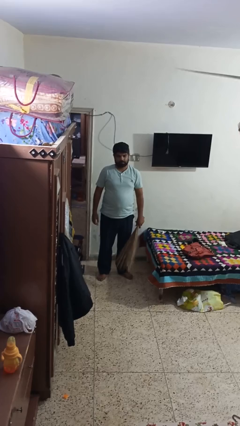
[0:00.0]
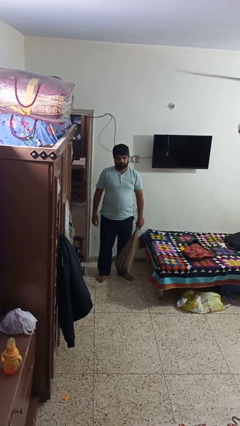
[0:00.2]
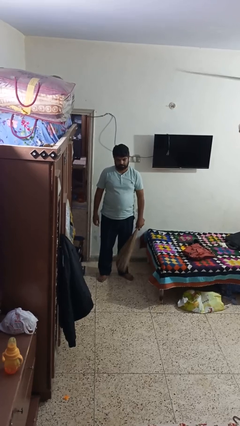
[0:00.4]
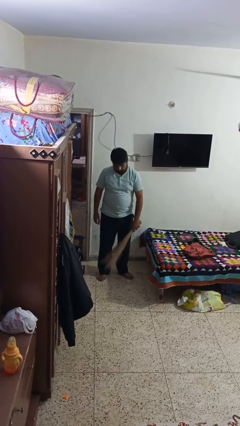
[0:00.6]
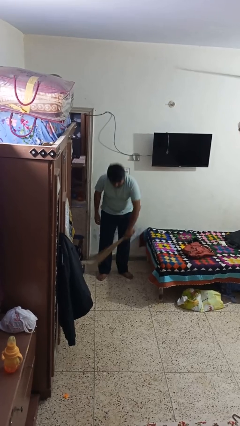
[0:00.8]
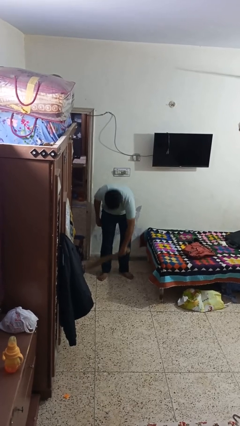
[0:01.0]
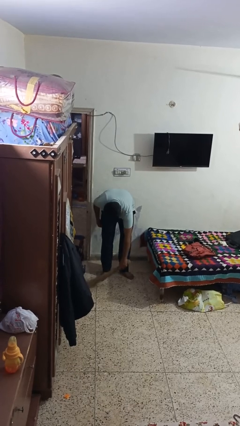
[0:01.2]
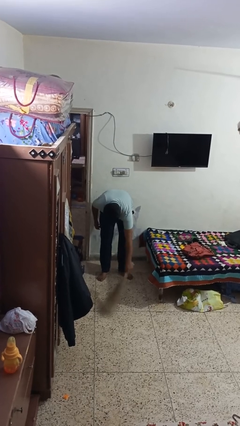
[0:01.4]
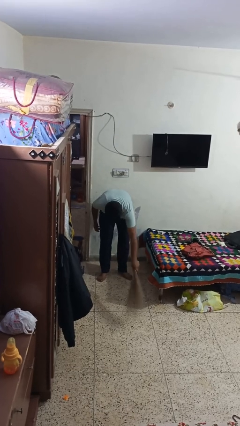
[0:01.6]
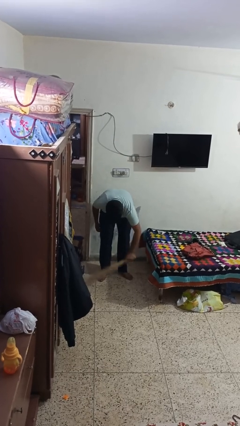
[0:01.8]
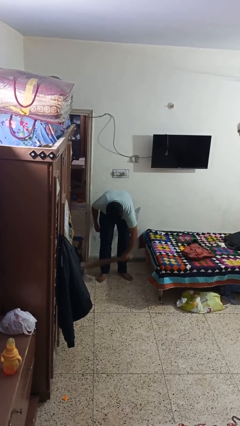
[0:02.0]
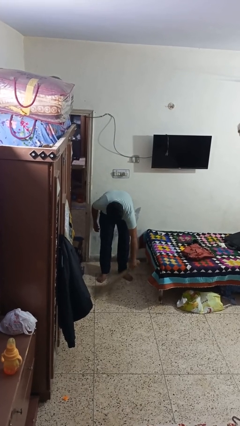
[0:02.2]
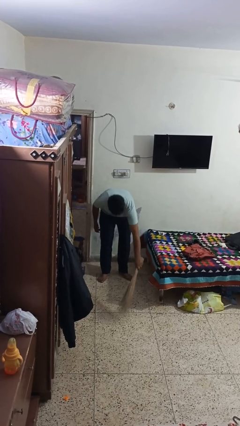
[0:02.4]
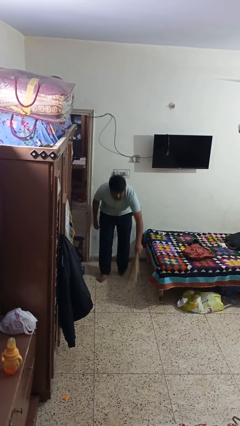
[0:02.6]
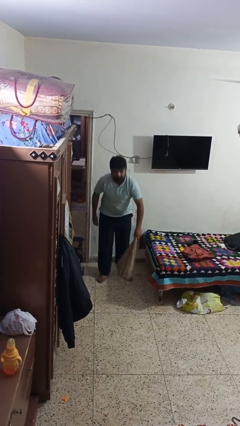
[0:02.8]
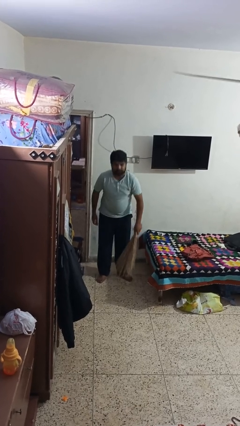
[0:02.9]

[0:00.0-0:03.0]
person sweeps floor

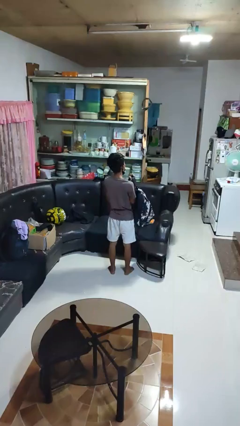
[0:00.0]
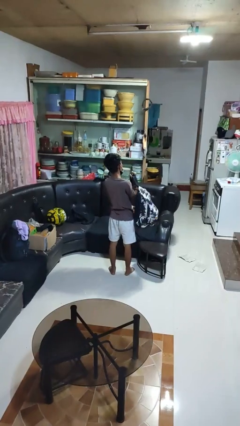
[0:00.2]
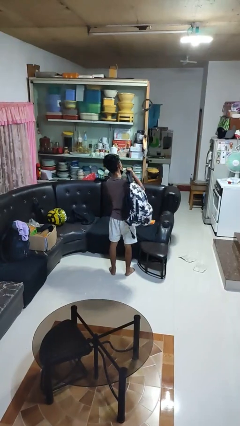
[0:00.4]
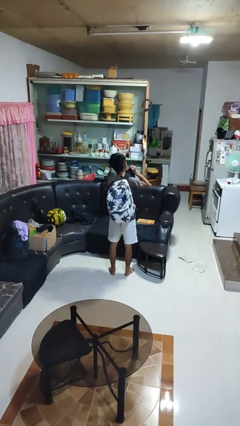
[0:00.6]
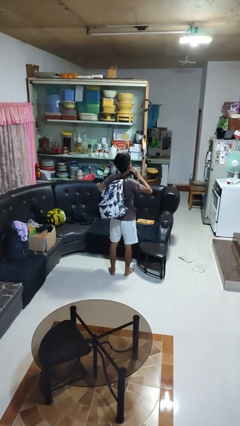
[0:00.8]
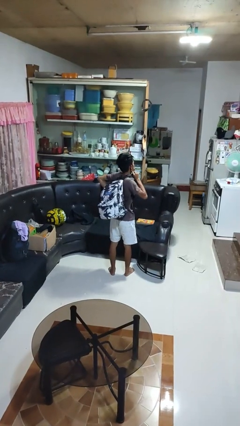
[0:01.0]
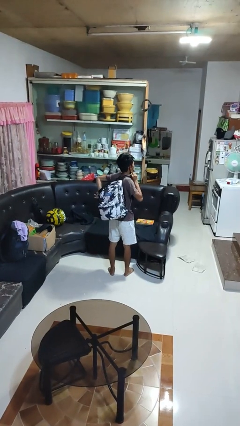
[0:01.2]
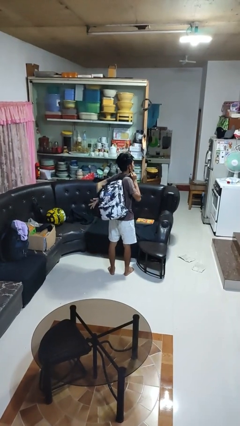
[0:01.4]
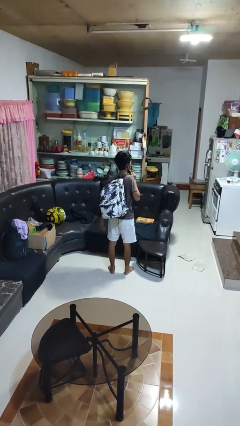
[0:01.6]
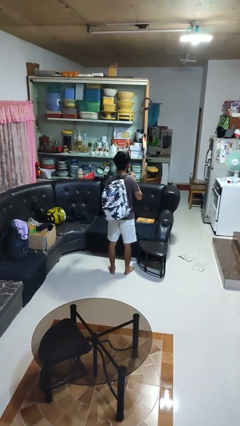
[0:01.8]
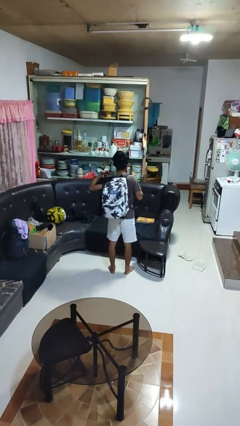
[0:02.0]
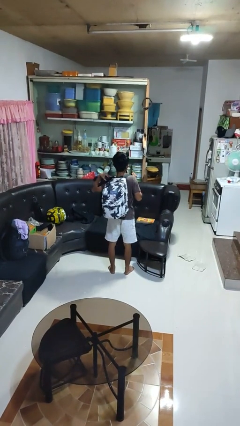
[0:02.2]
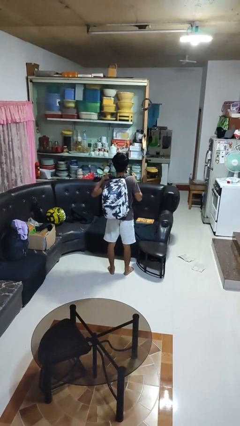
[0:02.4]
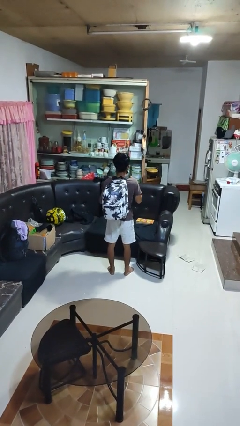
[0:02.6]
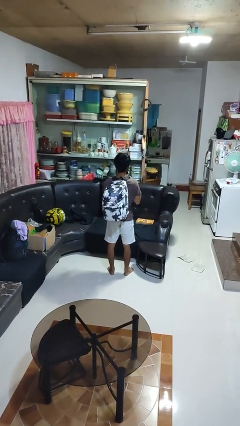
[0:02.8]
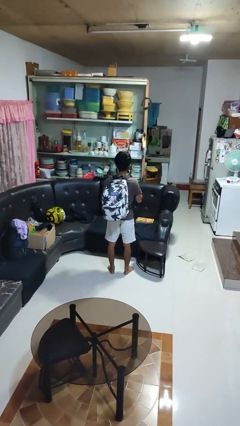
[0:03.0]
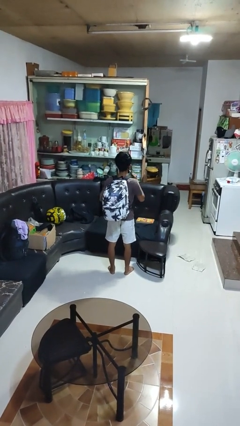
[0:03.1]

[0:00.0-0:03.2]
person puts on backpack

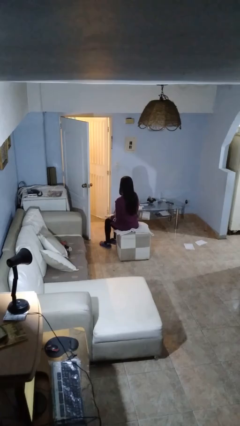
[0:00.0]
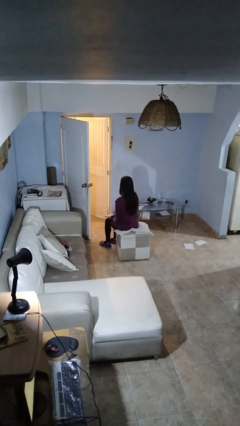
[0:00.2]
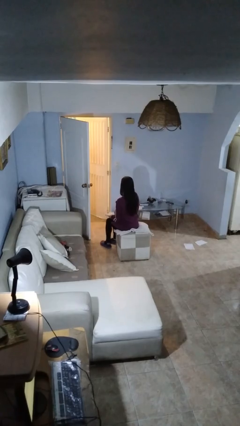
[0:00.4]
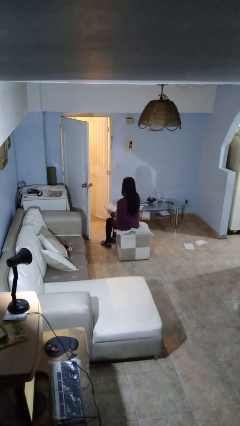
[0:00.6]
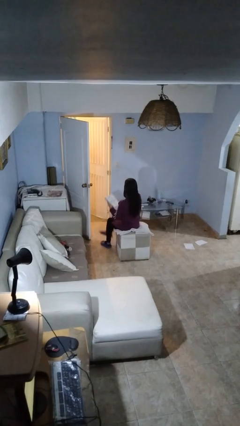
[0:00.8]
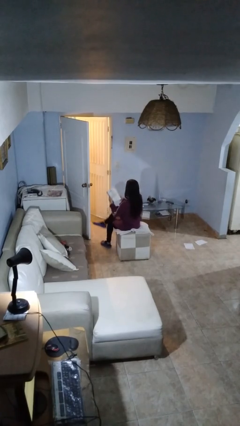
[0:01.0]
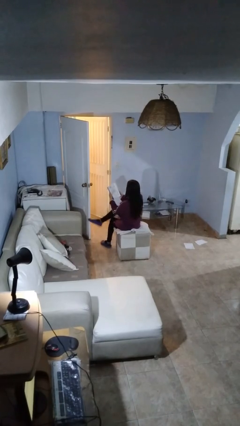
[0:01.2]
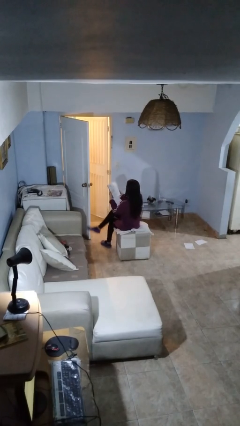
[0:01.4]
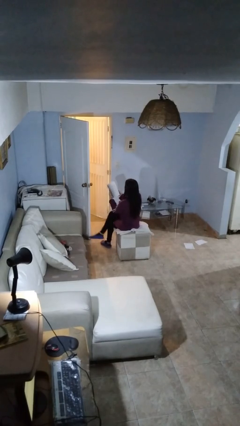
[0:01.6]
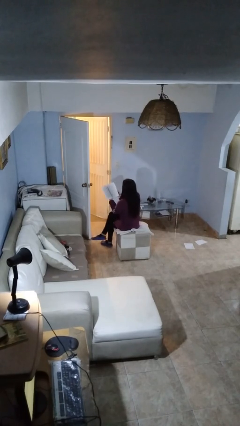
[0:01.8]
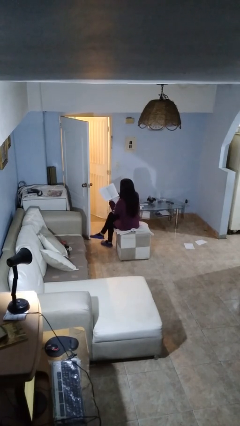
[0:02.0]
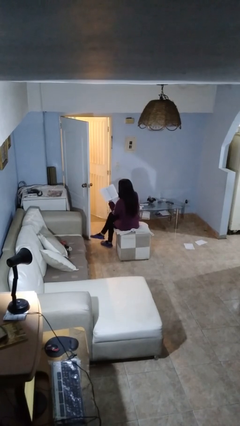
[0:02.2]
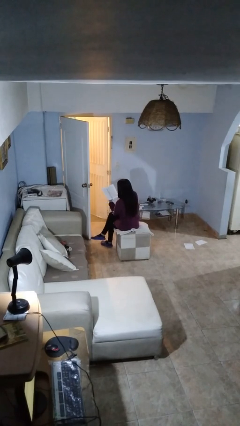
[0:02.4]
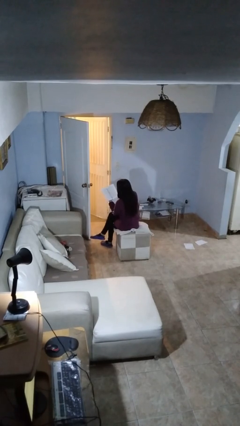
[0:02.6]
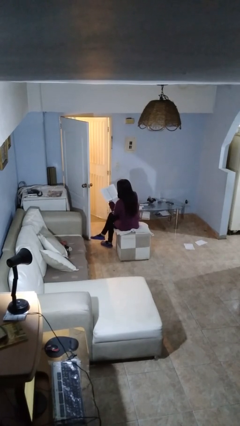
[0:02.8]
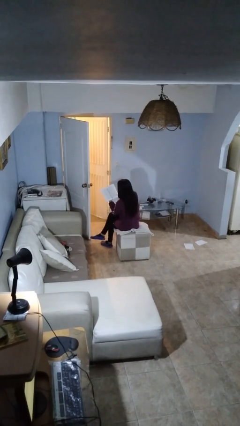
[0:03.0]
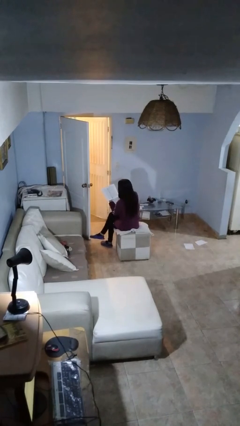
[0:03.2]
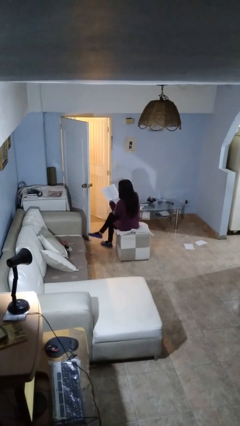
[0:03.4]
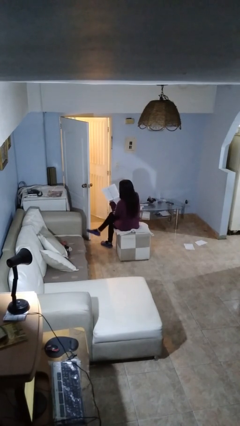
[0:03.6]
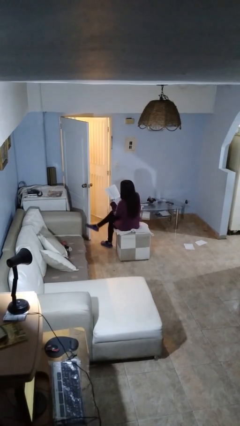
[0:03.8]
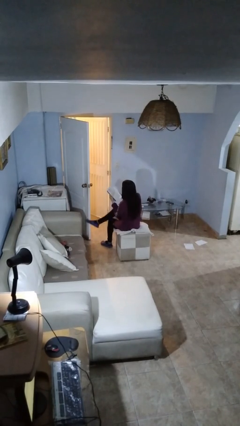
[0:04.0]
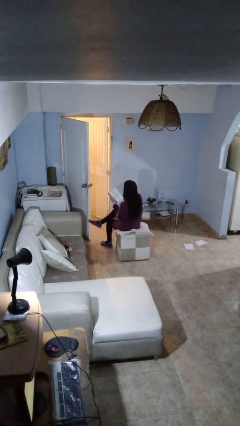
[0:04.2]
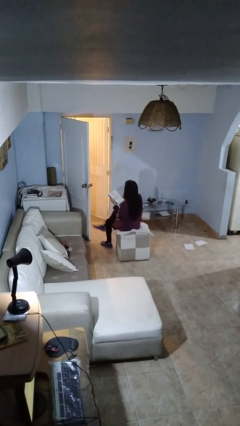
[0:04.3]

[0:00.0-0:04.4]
person reads book

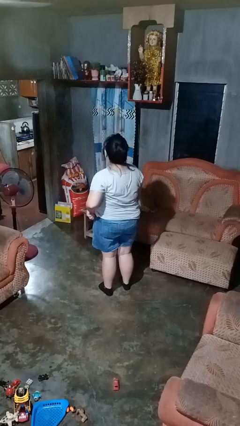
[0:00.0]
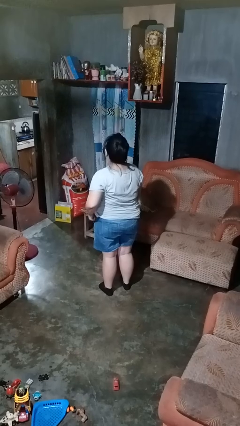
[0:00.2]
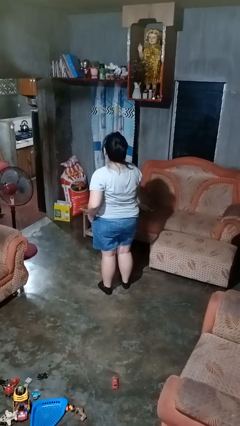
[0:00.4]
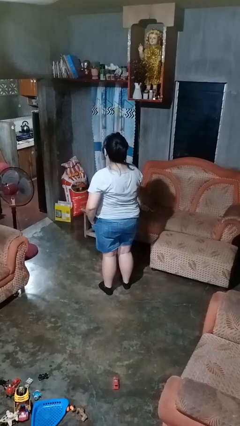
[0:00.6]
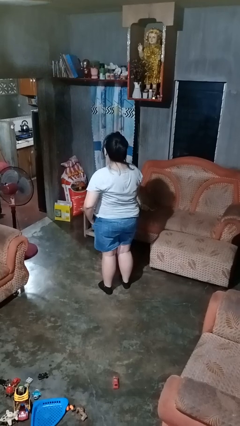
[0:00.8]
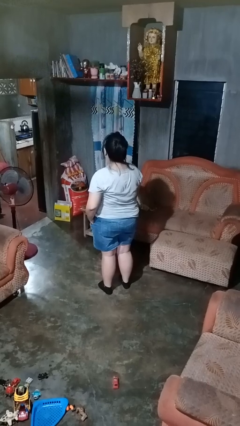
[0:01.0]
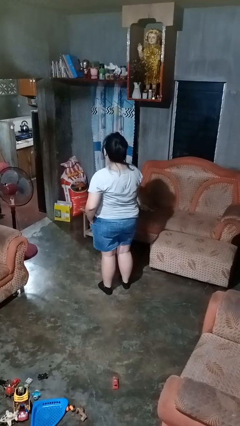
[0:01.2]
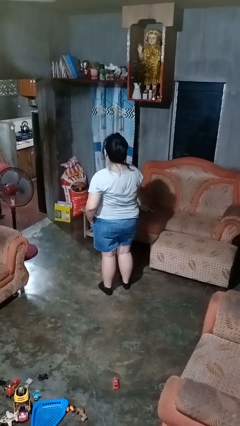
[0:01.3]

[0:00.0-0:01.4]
person puts hands in back pockets

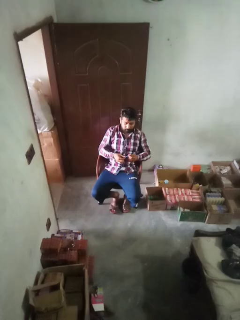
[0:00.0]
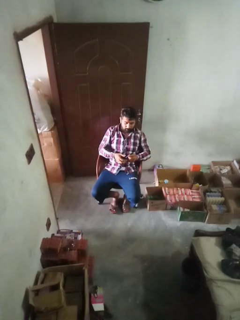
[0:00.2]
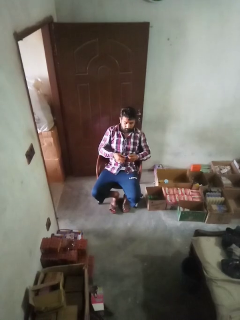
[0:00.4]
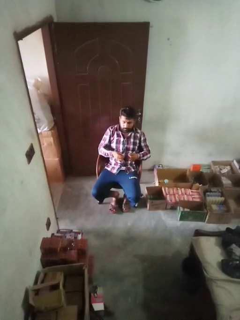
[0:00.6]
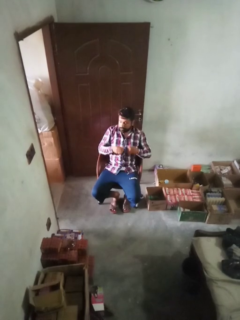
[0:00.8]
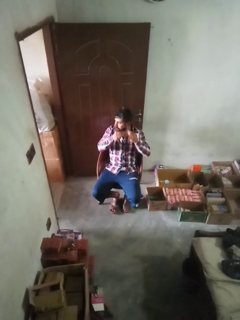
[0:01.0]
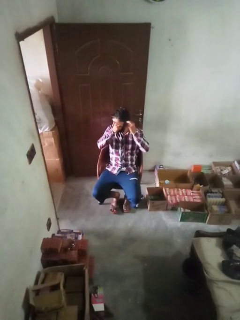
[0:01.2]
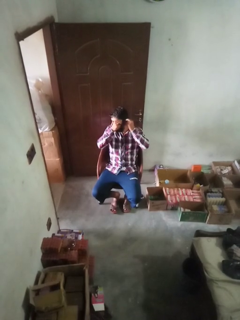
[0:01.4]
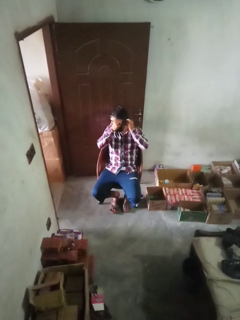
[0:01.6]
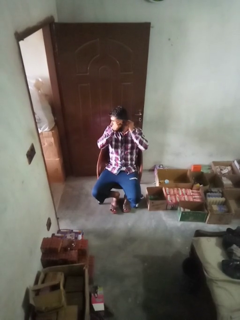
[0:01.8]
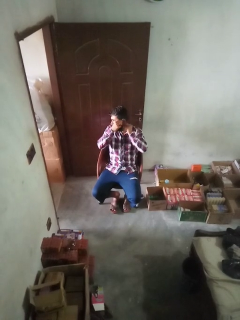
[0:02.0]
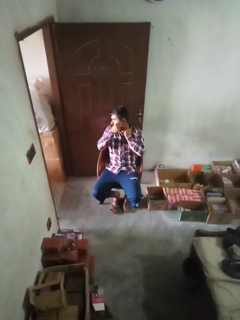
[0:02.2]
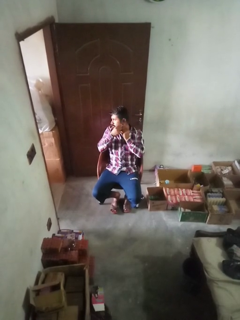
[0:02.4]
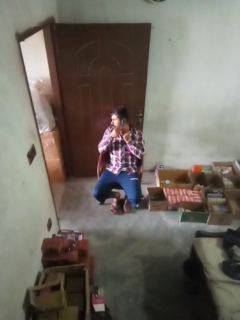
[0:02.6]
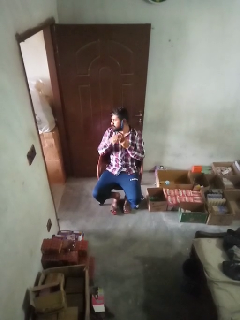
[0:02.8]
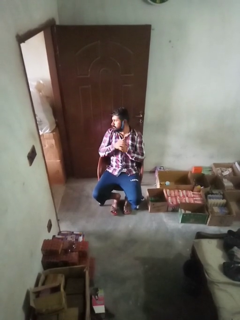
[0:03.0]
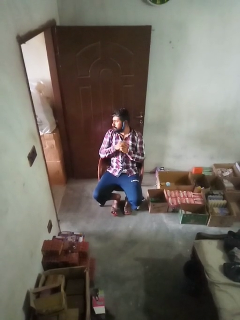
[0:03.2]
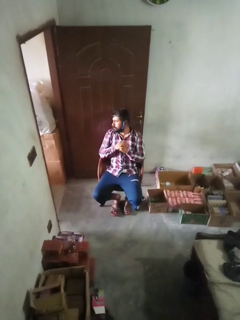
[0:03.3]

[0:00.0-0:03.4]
person puts on earrings

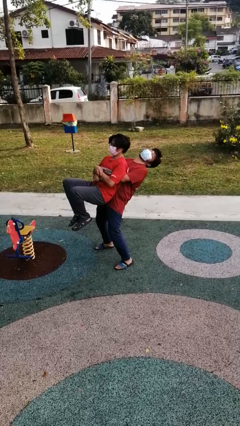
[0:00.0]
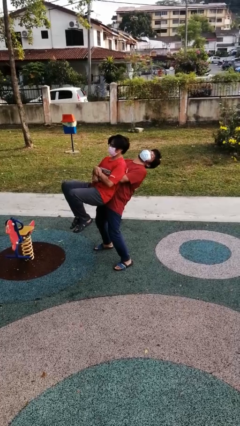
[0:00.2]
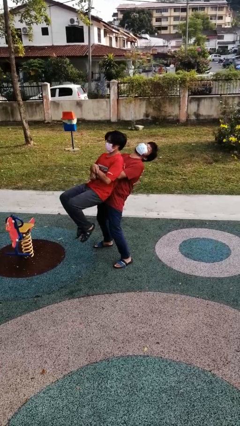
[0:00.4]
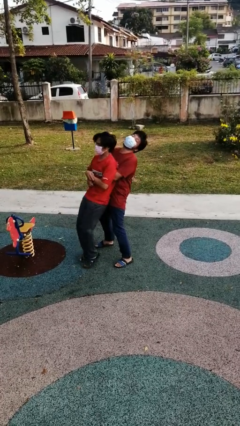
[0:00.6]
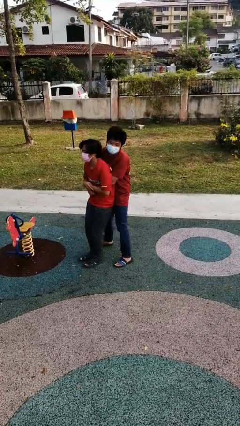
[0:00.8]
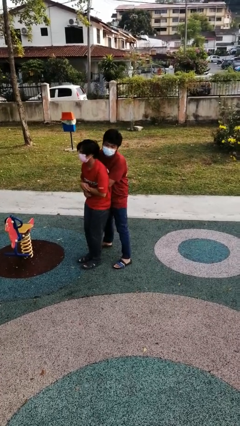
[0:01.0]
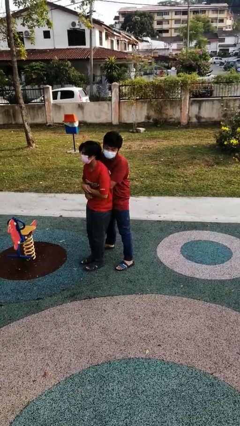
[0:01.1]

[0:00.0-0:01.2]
person puts down person

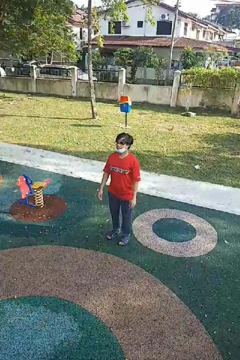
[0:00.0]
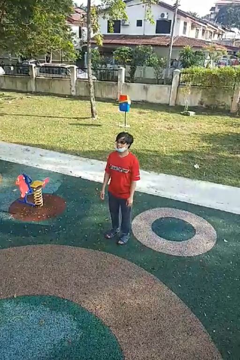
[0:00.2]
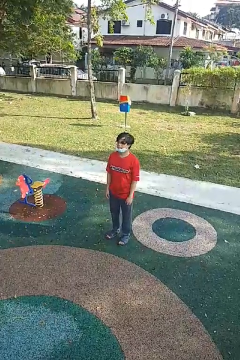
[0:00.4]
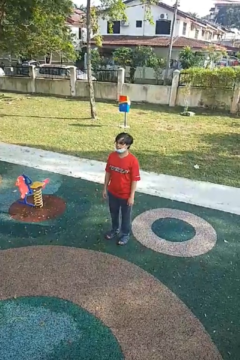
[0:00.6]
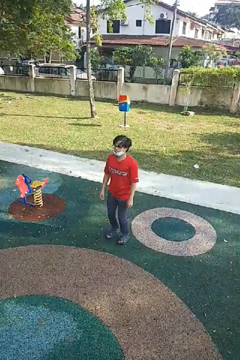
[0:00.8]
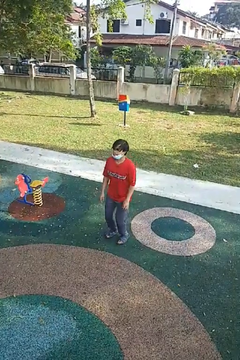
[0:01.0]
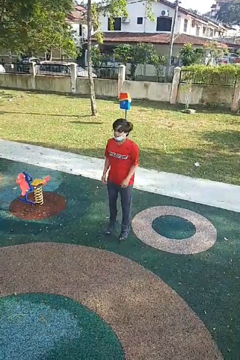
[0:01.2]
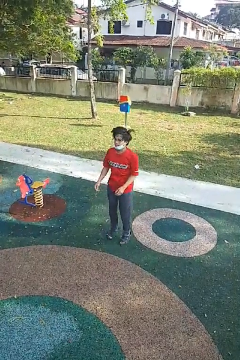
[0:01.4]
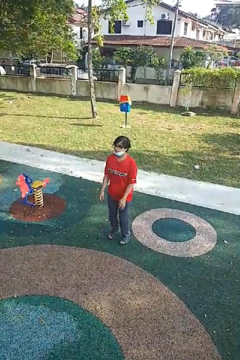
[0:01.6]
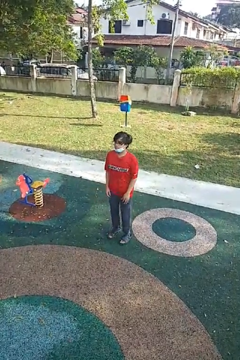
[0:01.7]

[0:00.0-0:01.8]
person jumps
